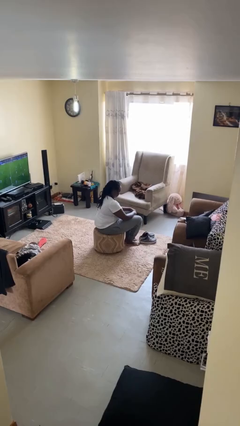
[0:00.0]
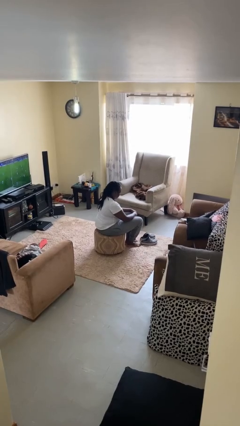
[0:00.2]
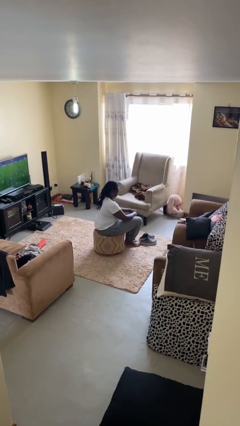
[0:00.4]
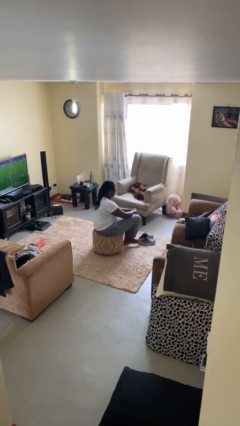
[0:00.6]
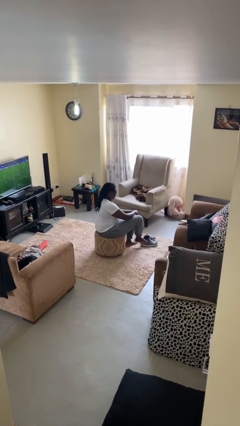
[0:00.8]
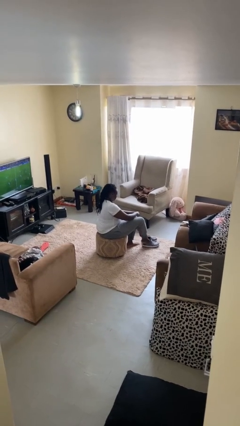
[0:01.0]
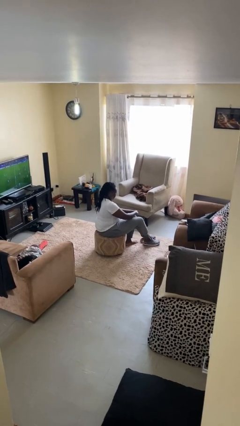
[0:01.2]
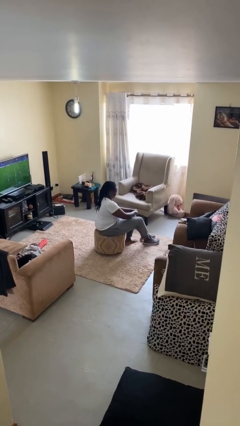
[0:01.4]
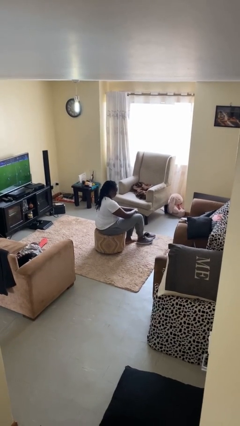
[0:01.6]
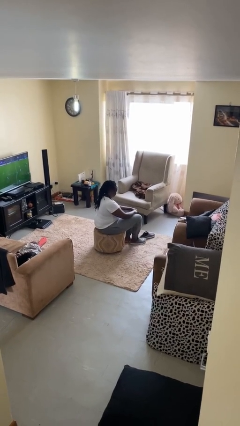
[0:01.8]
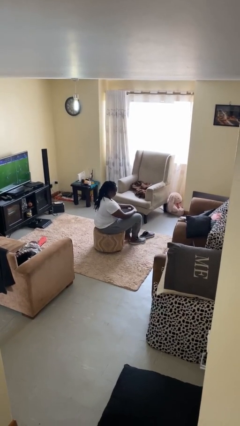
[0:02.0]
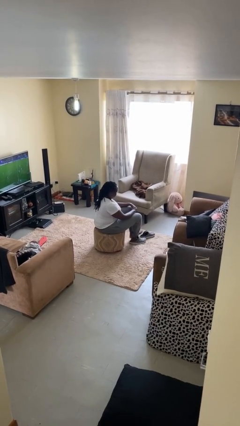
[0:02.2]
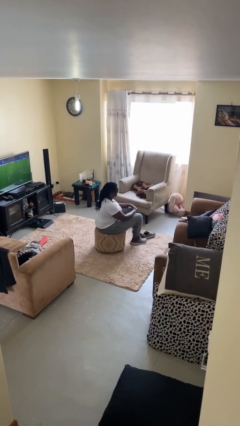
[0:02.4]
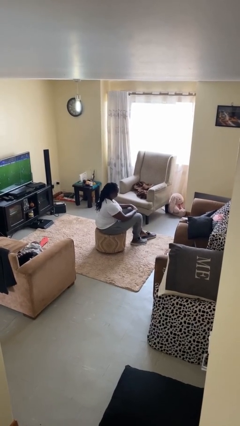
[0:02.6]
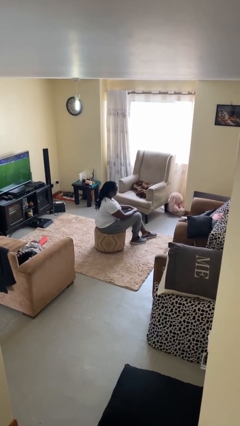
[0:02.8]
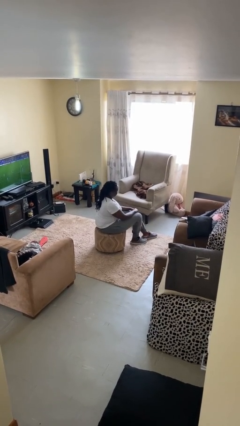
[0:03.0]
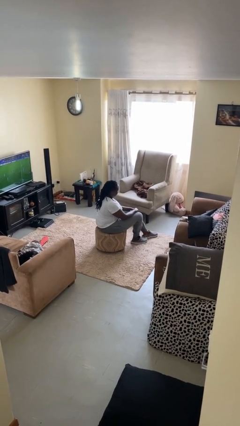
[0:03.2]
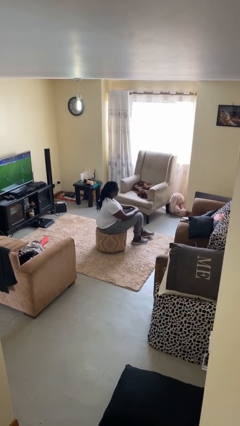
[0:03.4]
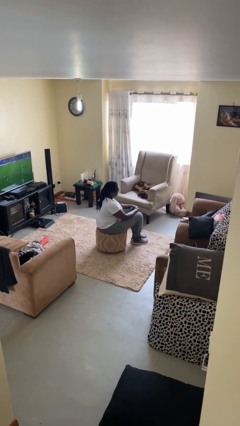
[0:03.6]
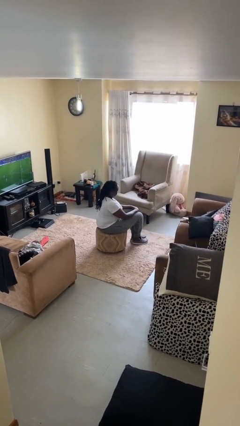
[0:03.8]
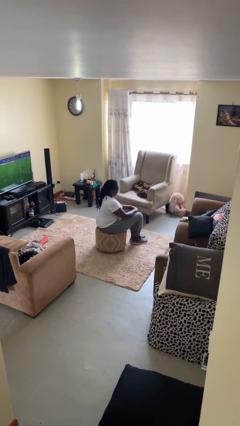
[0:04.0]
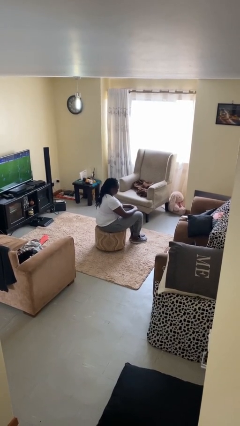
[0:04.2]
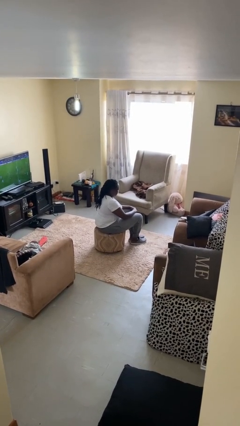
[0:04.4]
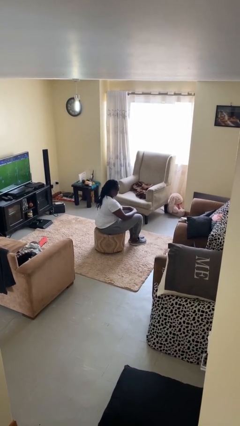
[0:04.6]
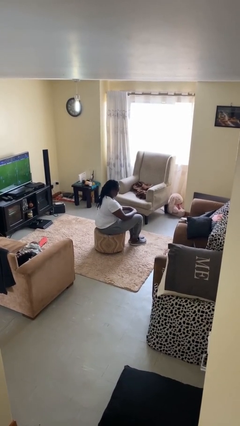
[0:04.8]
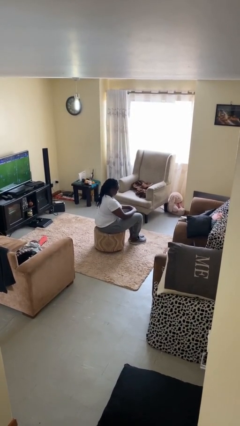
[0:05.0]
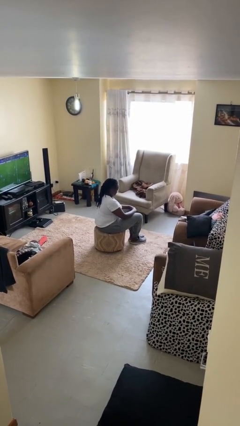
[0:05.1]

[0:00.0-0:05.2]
person puts on shoes

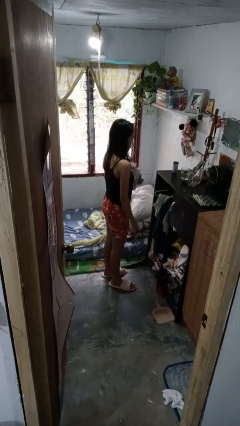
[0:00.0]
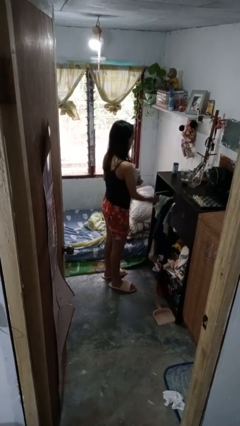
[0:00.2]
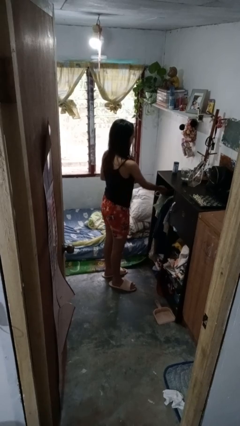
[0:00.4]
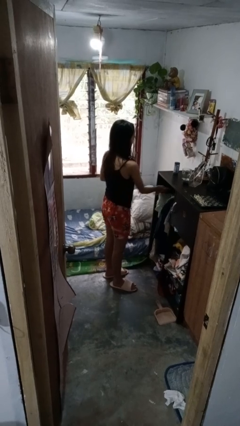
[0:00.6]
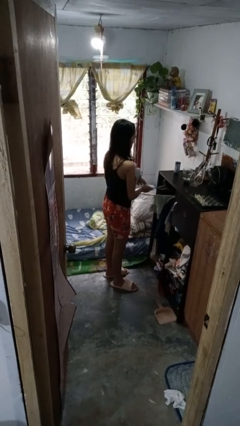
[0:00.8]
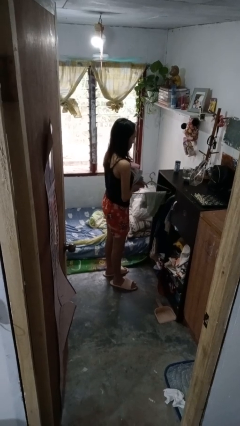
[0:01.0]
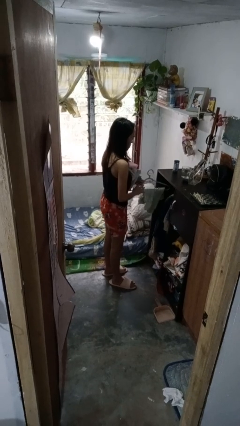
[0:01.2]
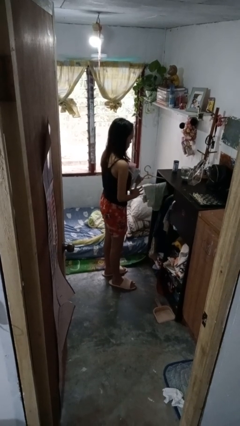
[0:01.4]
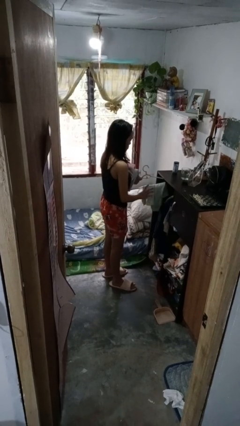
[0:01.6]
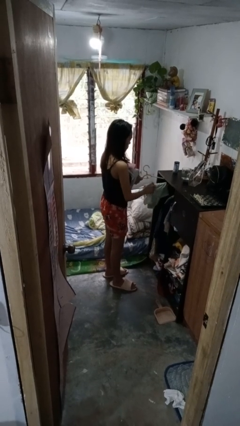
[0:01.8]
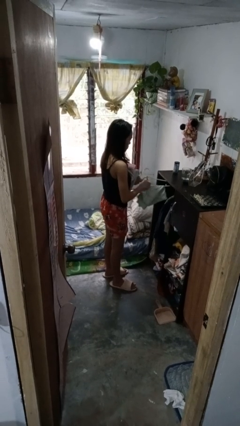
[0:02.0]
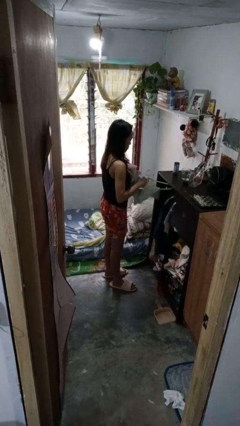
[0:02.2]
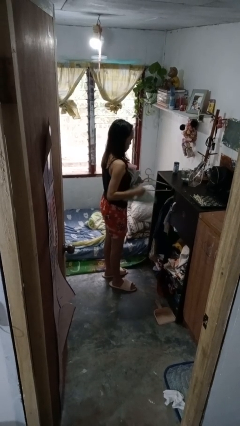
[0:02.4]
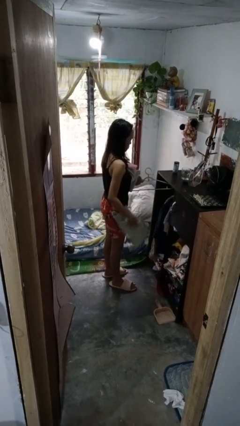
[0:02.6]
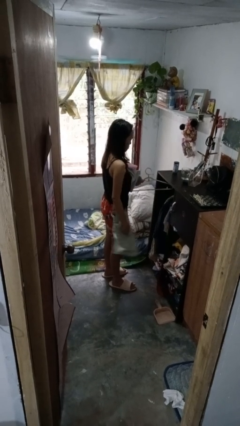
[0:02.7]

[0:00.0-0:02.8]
person takes clothes from closet

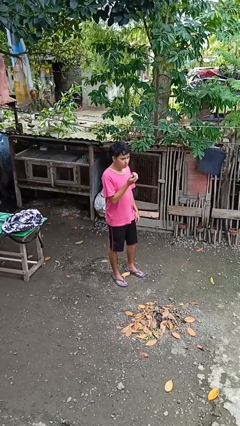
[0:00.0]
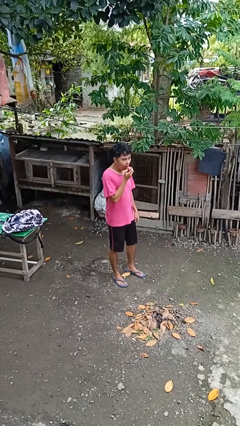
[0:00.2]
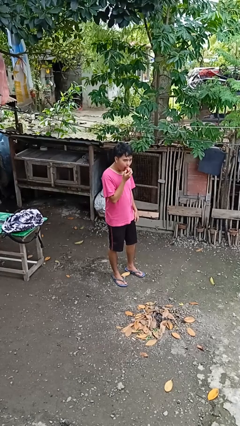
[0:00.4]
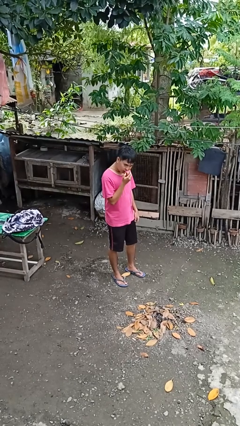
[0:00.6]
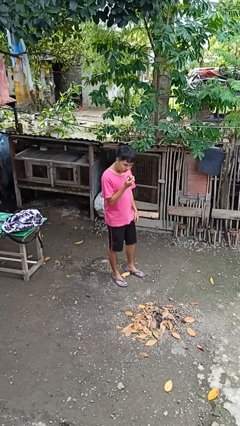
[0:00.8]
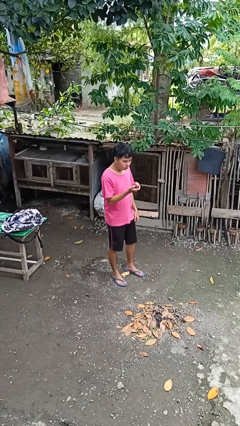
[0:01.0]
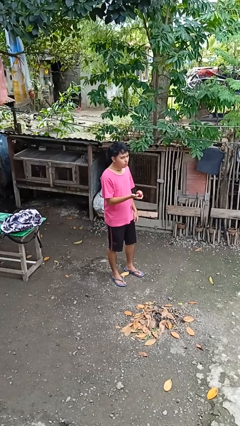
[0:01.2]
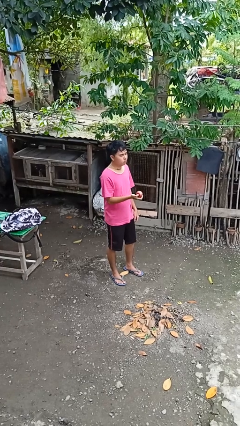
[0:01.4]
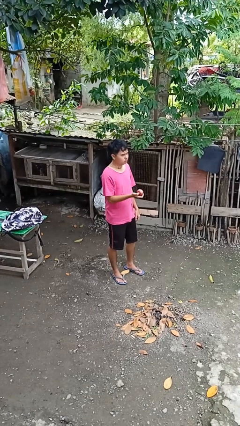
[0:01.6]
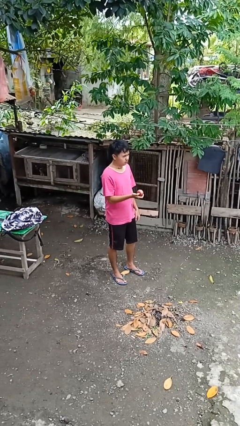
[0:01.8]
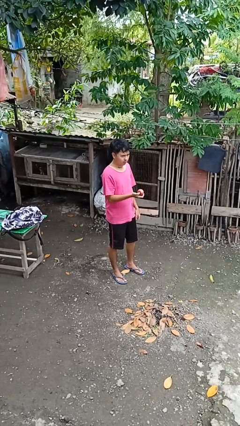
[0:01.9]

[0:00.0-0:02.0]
person eats apple

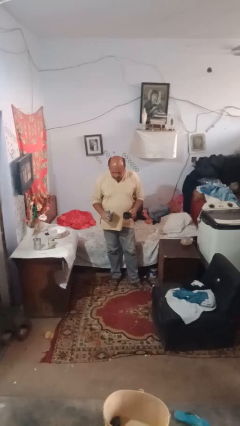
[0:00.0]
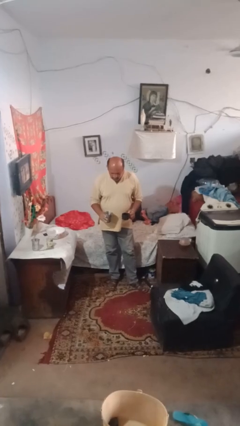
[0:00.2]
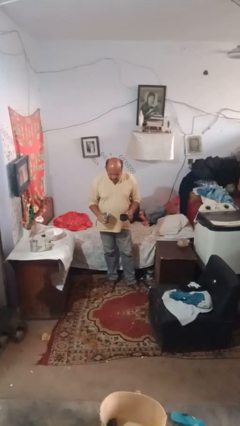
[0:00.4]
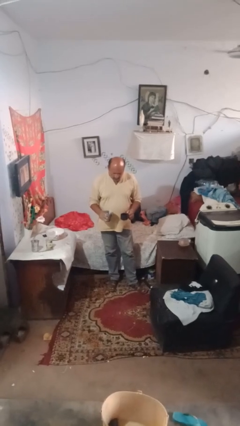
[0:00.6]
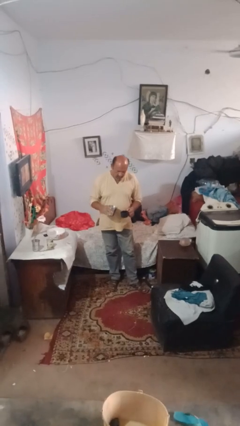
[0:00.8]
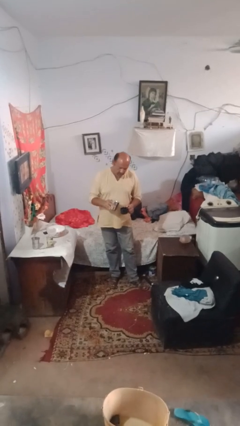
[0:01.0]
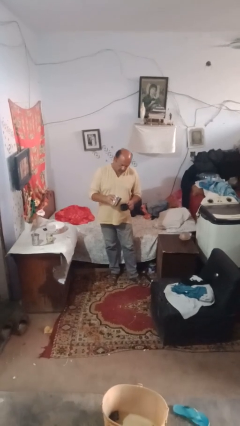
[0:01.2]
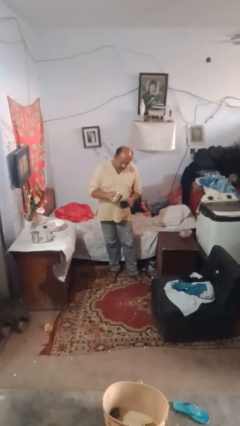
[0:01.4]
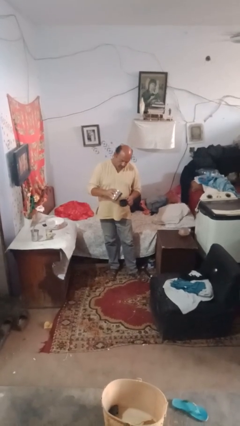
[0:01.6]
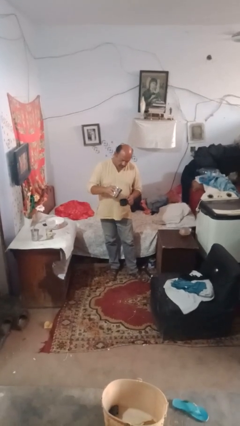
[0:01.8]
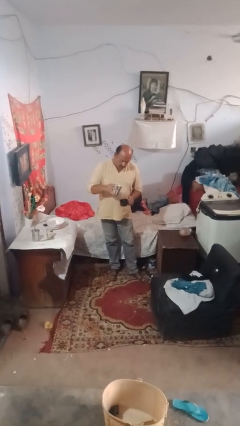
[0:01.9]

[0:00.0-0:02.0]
person pours liquid into cup

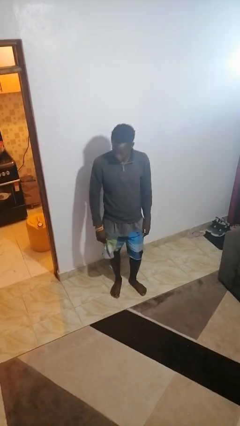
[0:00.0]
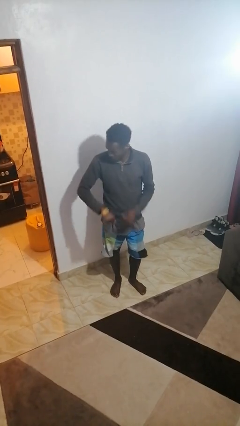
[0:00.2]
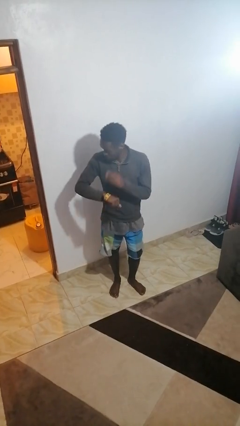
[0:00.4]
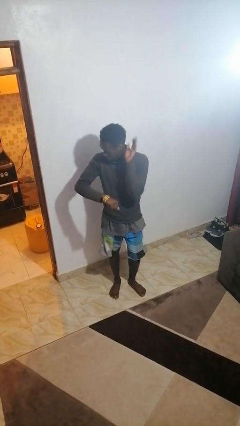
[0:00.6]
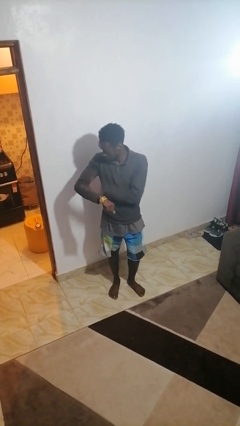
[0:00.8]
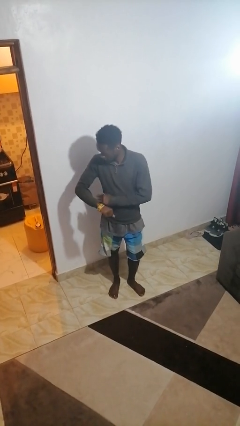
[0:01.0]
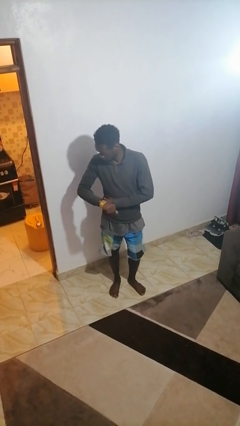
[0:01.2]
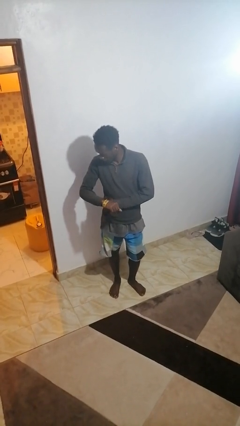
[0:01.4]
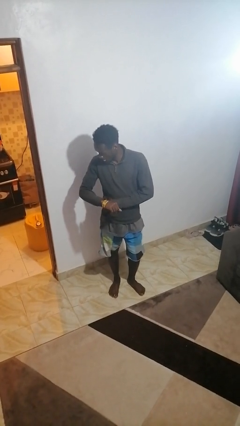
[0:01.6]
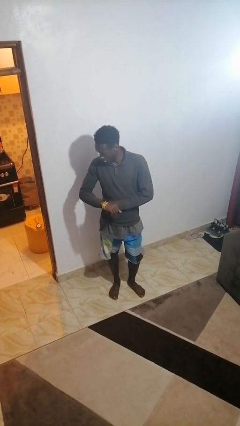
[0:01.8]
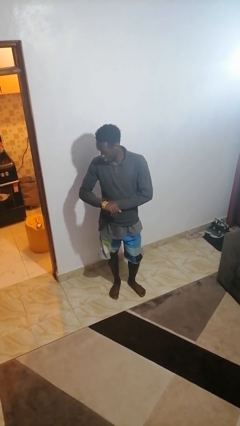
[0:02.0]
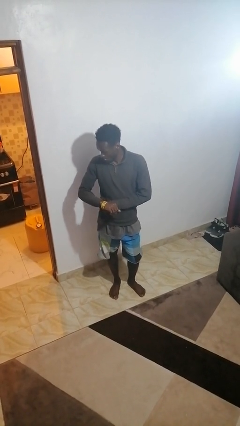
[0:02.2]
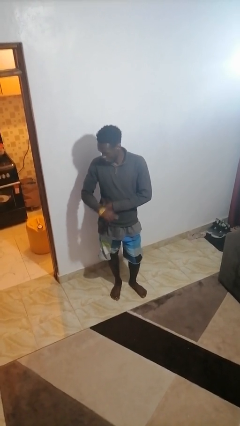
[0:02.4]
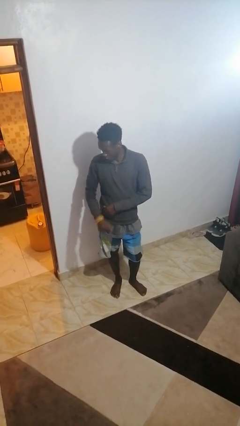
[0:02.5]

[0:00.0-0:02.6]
person swats bug

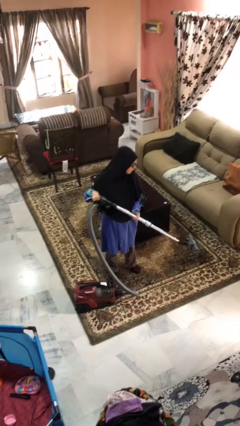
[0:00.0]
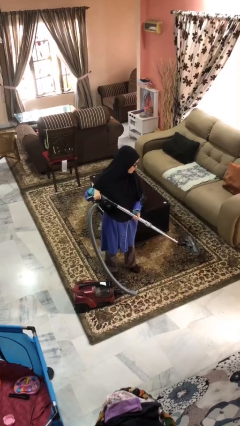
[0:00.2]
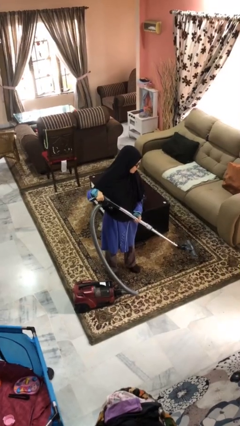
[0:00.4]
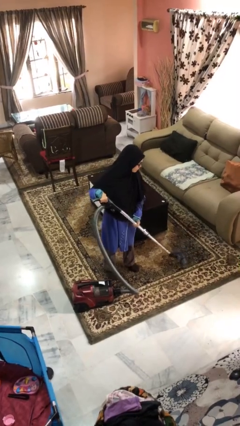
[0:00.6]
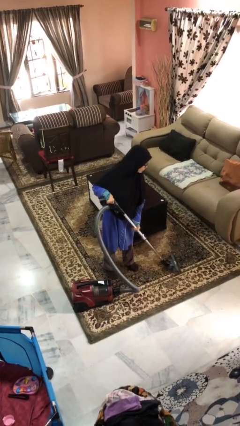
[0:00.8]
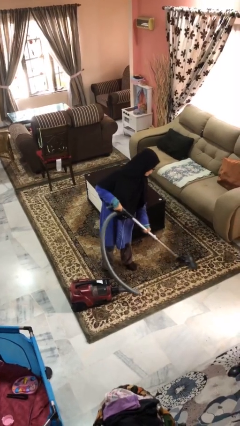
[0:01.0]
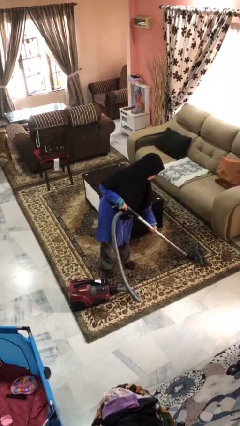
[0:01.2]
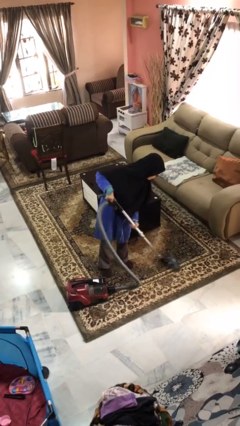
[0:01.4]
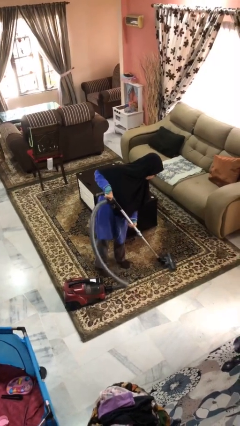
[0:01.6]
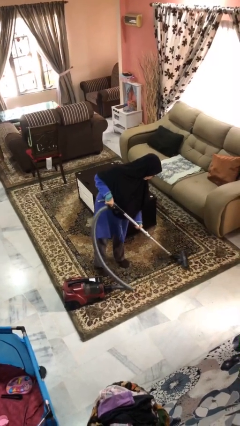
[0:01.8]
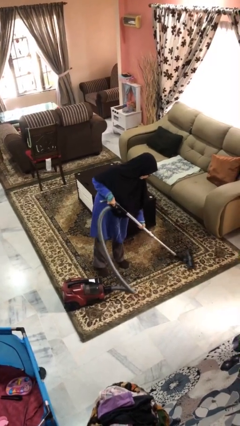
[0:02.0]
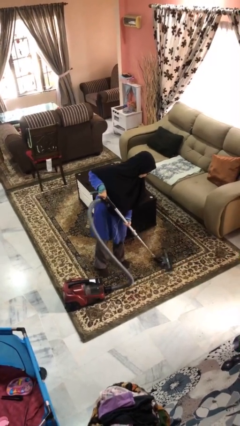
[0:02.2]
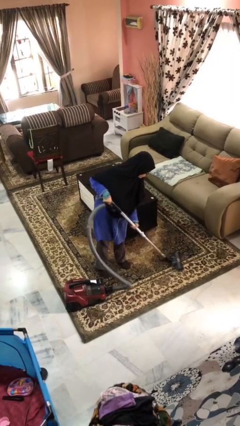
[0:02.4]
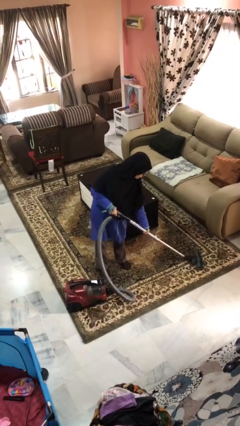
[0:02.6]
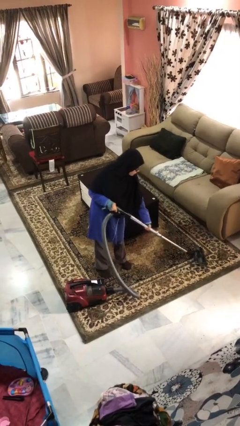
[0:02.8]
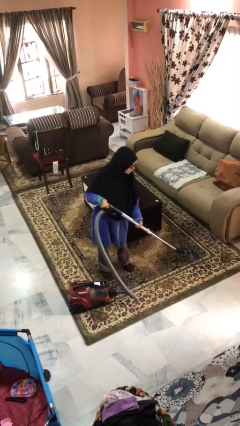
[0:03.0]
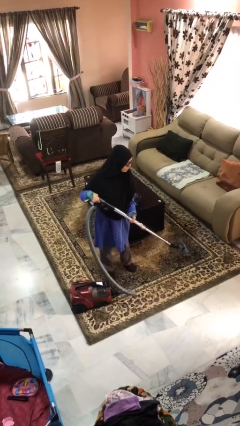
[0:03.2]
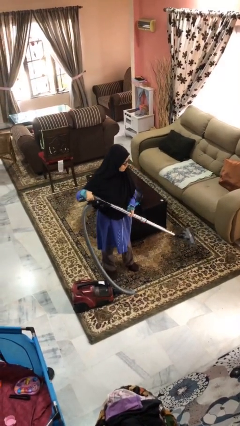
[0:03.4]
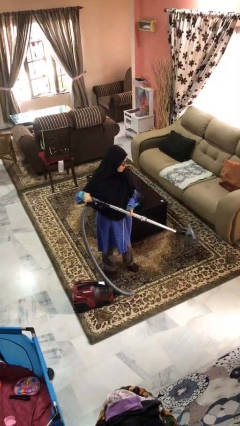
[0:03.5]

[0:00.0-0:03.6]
person vacuums carpet
